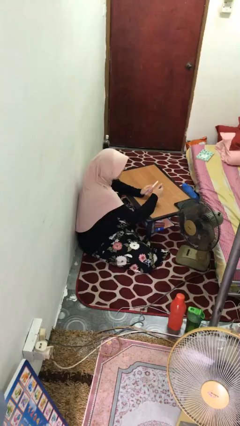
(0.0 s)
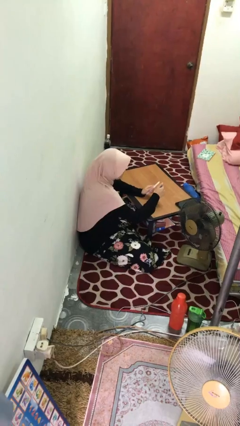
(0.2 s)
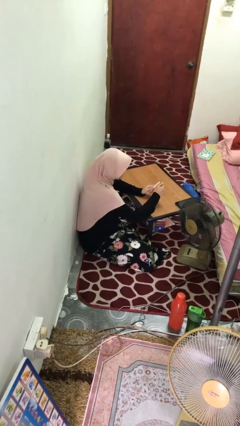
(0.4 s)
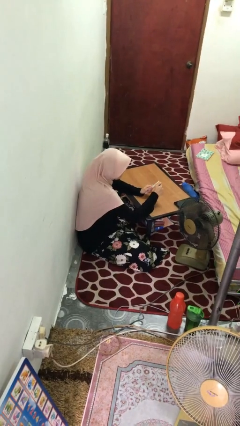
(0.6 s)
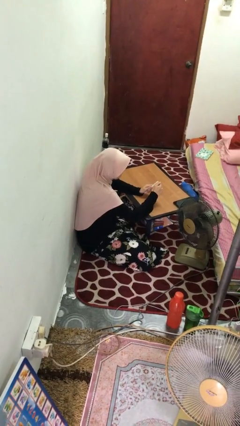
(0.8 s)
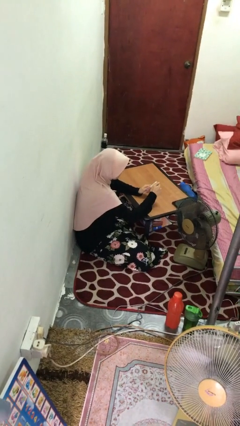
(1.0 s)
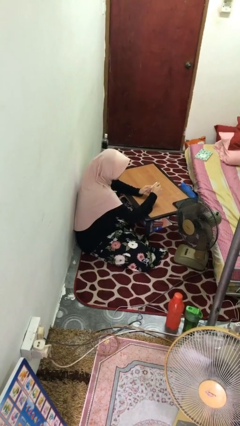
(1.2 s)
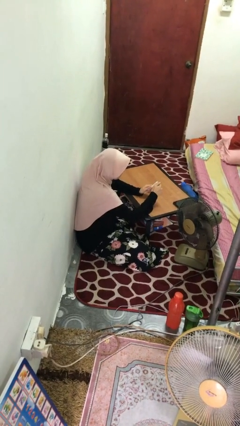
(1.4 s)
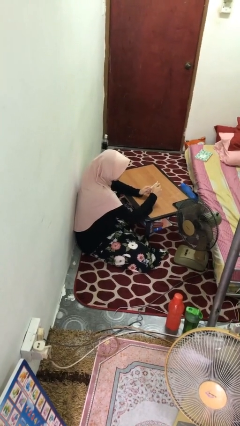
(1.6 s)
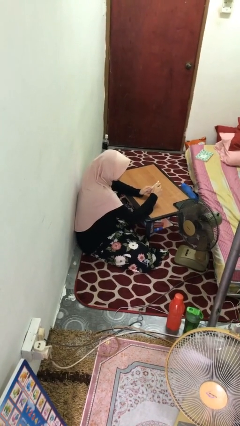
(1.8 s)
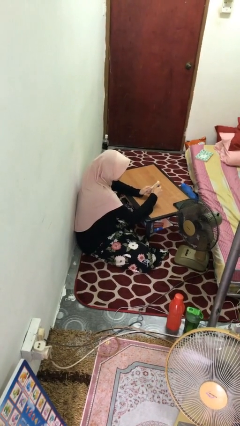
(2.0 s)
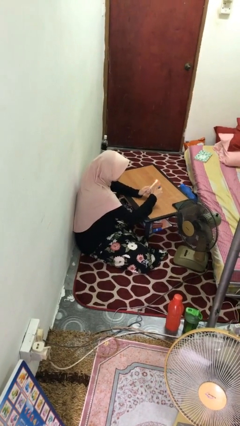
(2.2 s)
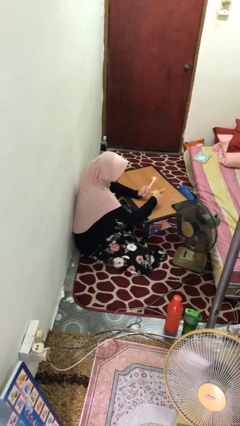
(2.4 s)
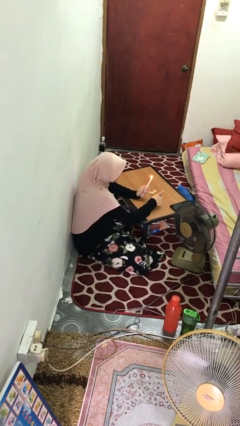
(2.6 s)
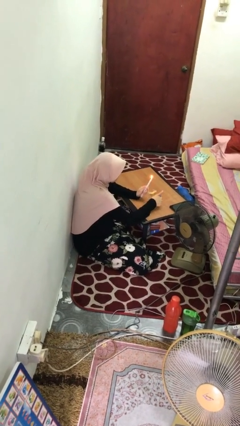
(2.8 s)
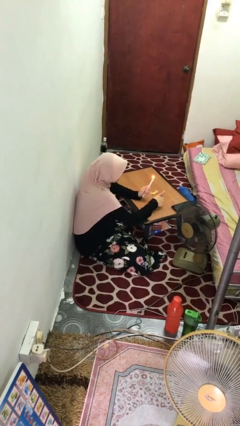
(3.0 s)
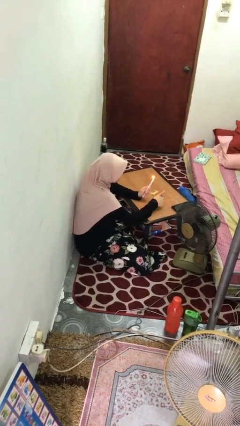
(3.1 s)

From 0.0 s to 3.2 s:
person lights candle

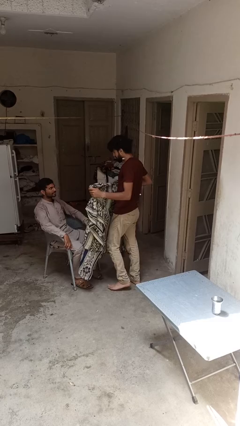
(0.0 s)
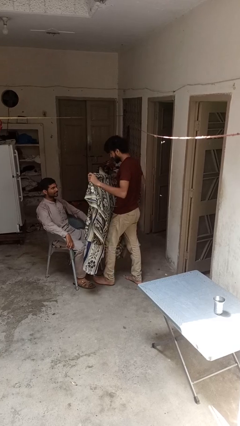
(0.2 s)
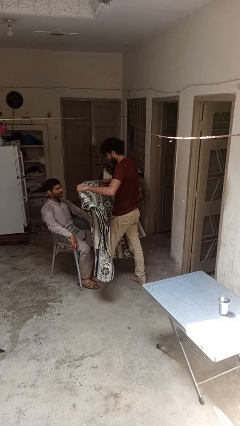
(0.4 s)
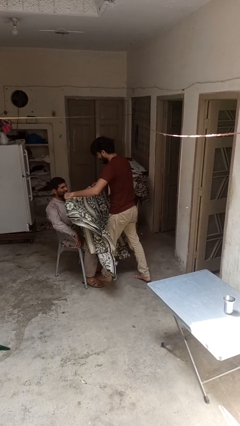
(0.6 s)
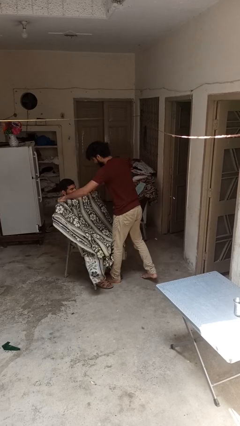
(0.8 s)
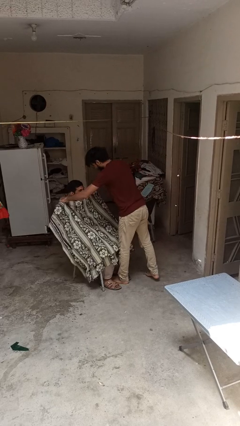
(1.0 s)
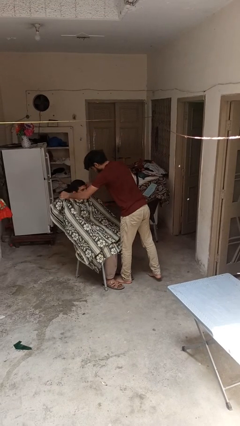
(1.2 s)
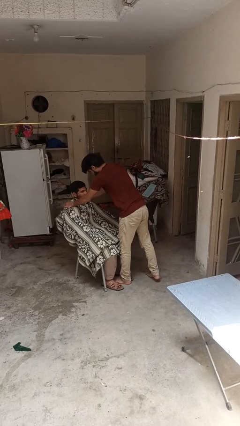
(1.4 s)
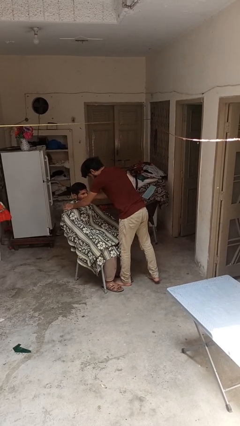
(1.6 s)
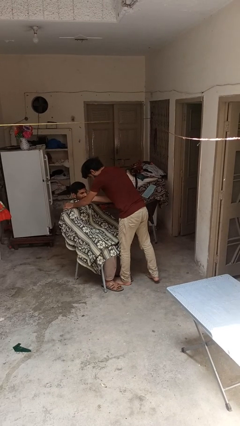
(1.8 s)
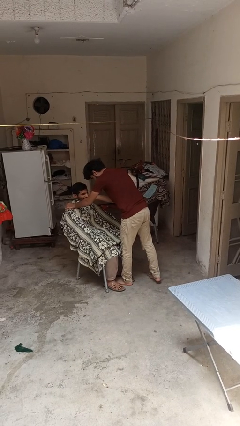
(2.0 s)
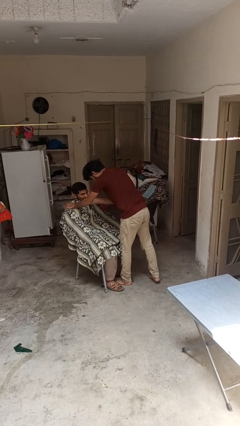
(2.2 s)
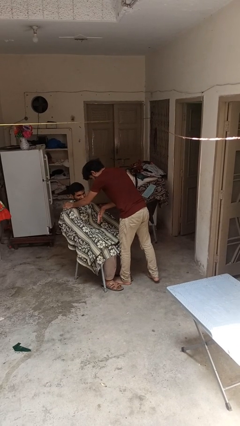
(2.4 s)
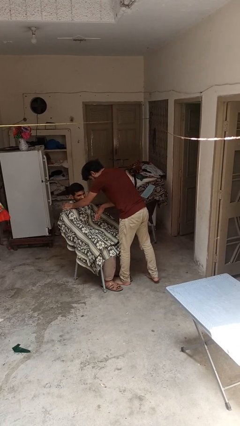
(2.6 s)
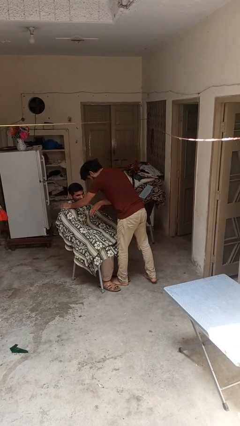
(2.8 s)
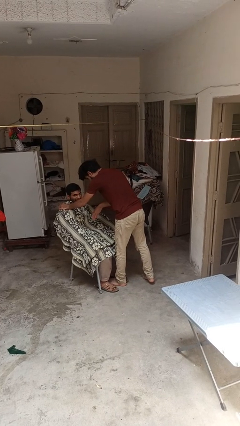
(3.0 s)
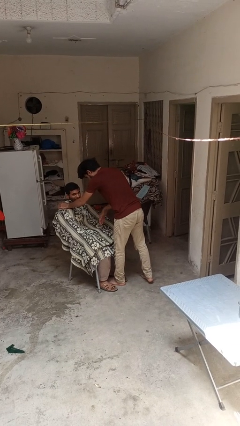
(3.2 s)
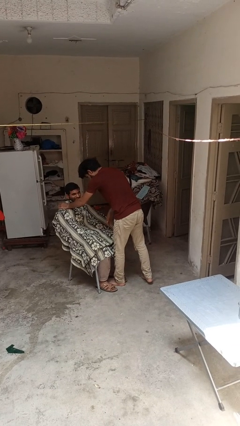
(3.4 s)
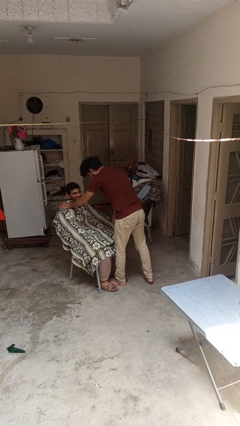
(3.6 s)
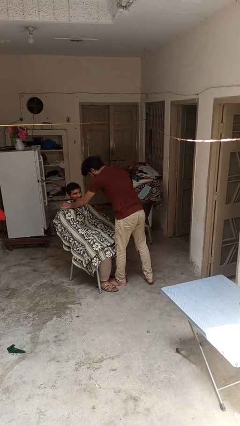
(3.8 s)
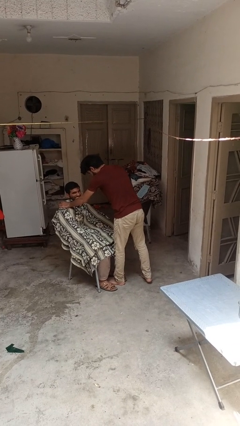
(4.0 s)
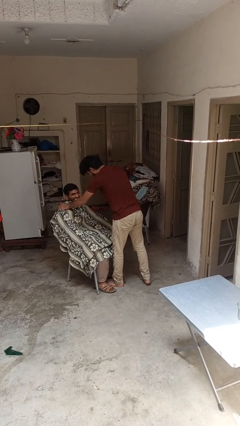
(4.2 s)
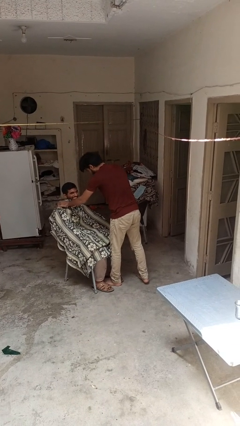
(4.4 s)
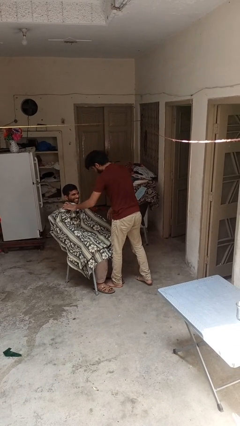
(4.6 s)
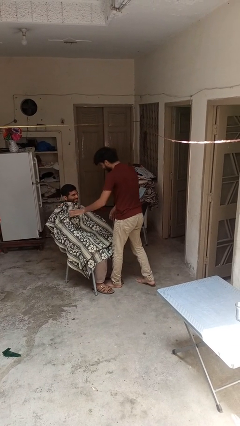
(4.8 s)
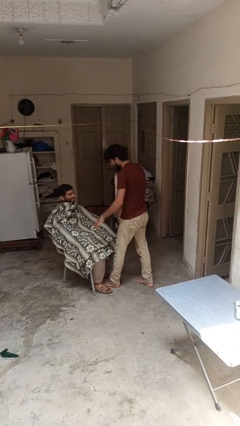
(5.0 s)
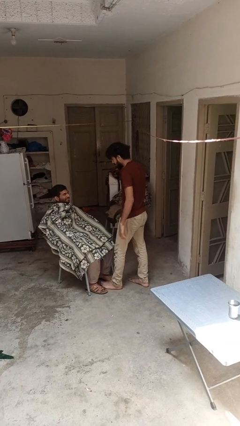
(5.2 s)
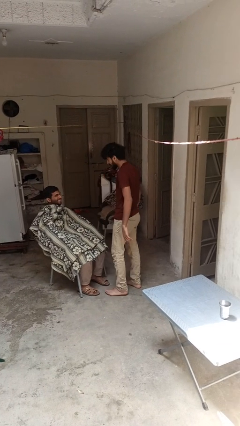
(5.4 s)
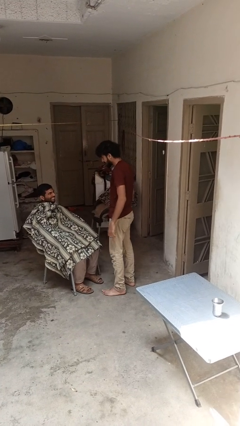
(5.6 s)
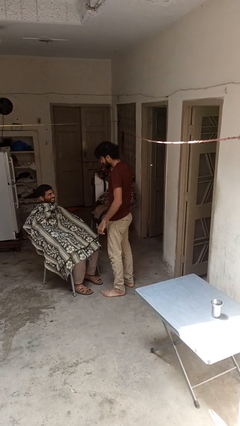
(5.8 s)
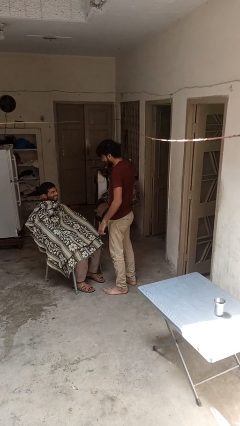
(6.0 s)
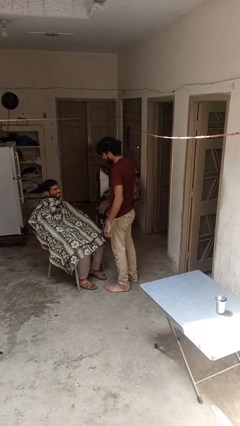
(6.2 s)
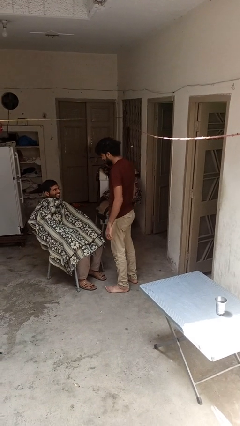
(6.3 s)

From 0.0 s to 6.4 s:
person covers friend with blanket

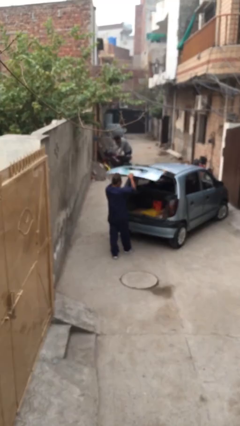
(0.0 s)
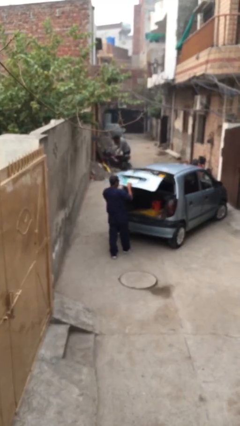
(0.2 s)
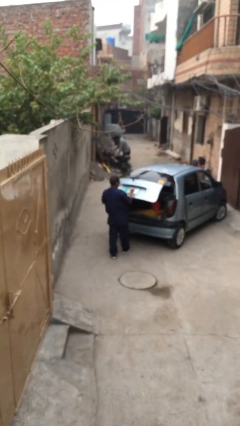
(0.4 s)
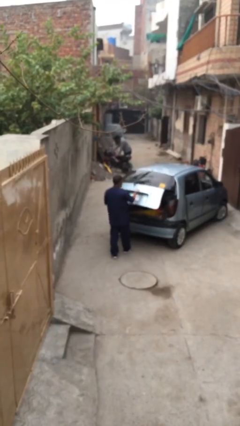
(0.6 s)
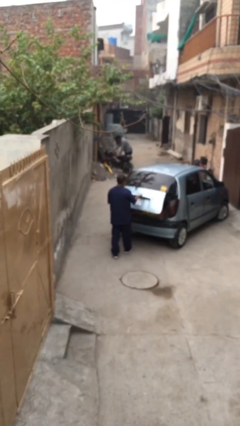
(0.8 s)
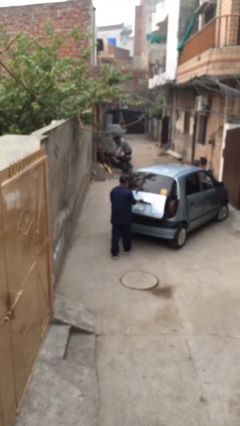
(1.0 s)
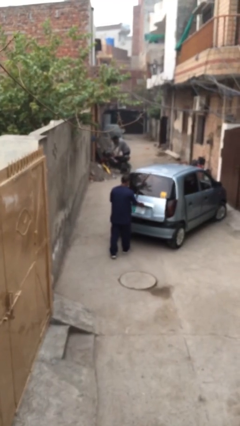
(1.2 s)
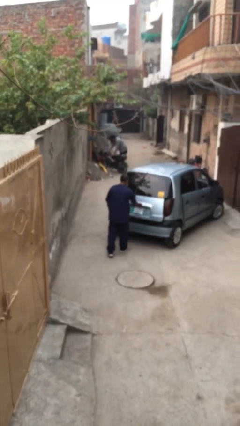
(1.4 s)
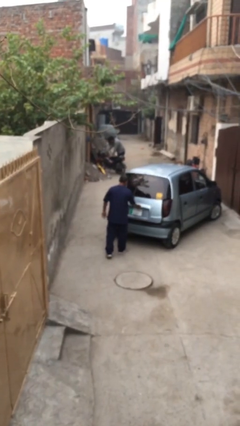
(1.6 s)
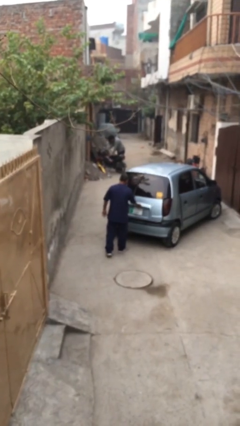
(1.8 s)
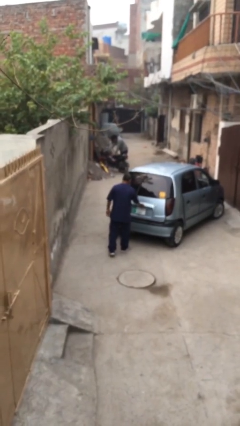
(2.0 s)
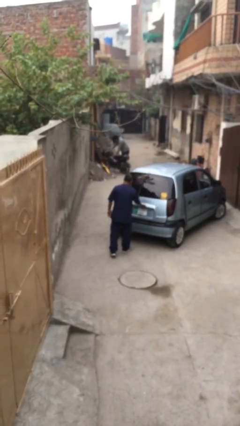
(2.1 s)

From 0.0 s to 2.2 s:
person closes car trunk

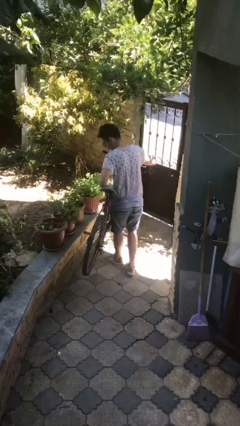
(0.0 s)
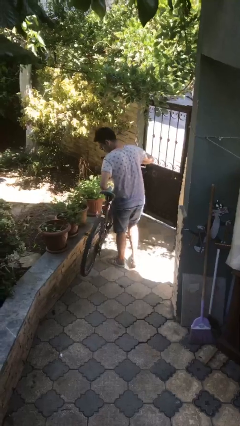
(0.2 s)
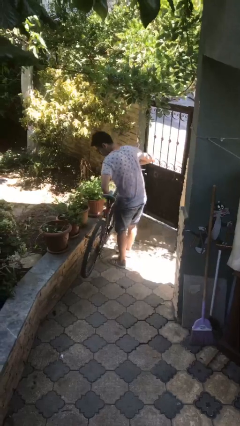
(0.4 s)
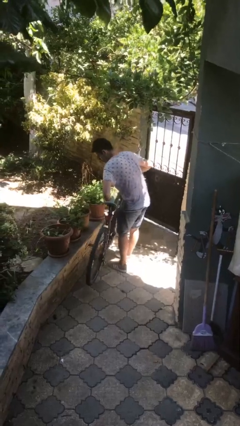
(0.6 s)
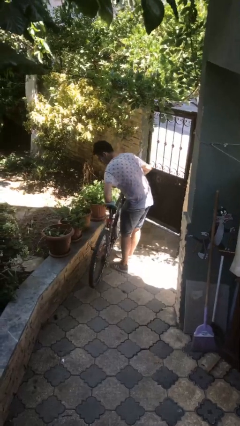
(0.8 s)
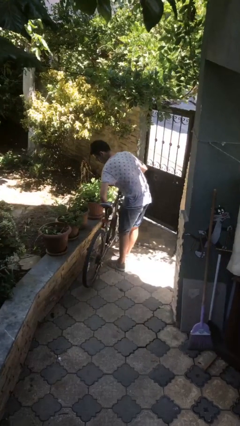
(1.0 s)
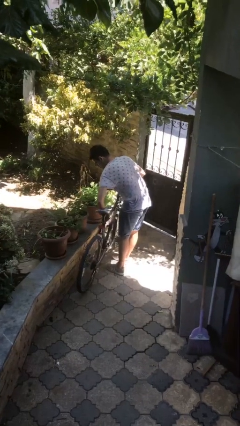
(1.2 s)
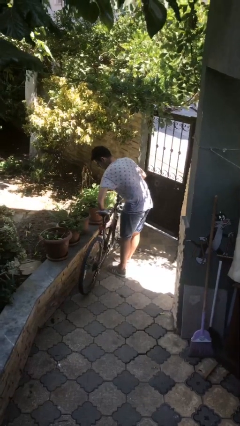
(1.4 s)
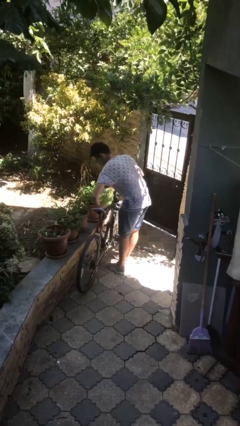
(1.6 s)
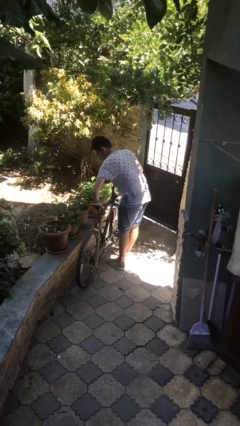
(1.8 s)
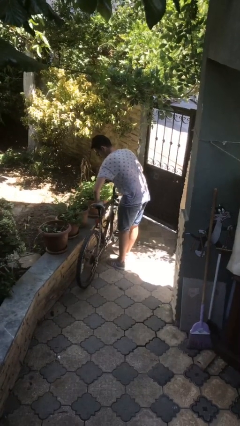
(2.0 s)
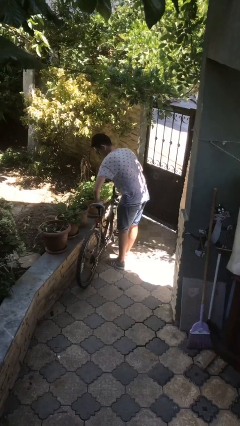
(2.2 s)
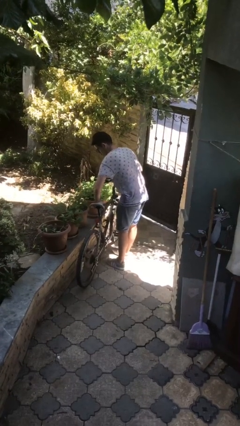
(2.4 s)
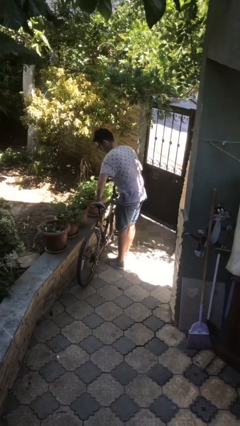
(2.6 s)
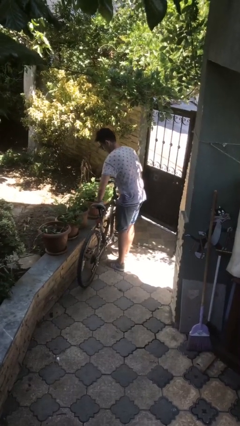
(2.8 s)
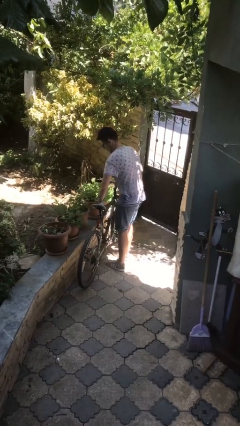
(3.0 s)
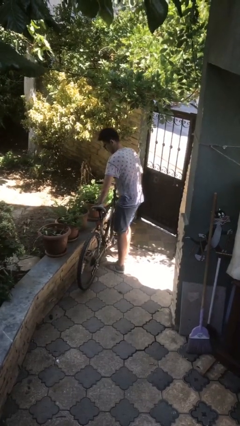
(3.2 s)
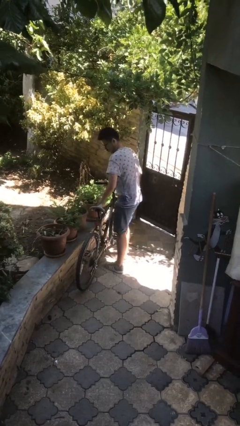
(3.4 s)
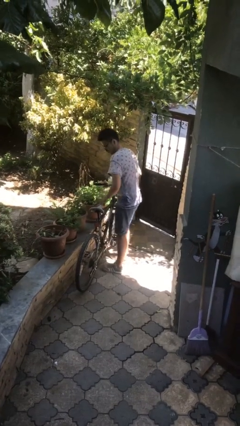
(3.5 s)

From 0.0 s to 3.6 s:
person puts down object on floor

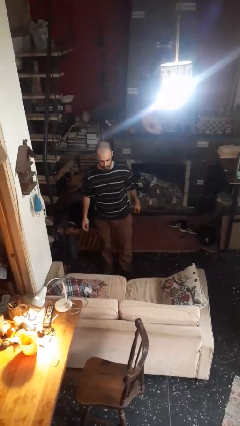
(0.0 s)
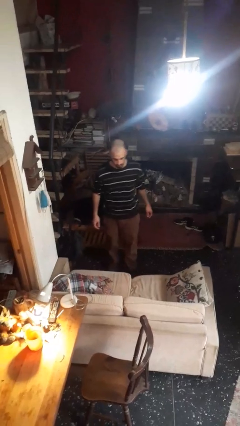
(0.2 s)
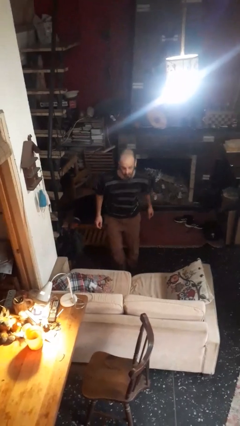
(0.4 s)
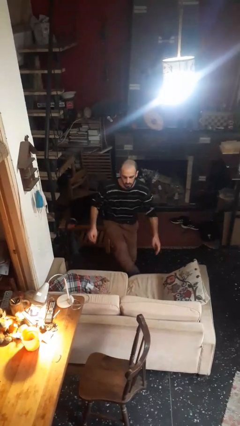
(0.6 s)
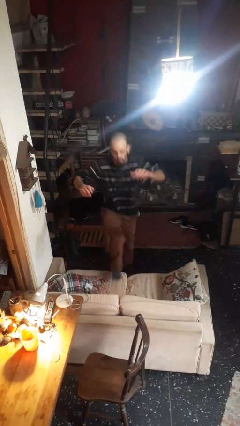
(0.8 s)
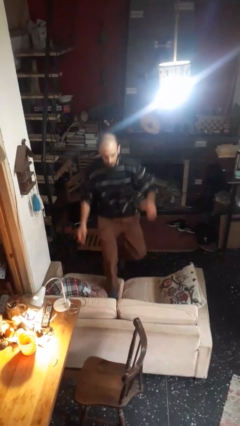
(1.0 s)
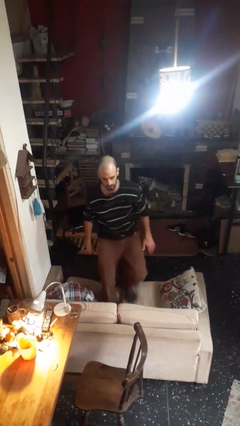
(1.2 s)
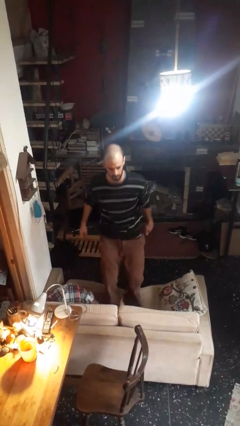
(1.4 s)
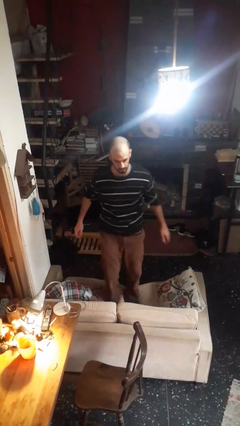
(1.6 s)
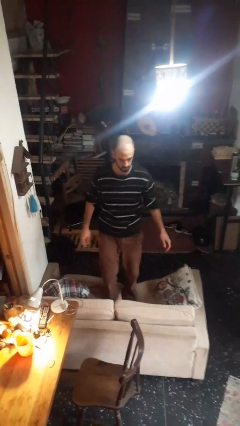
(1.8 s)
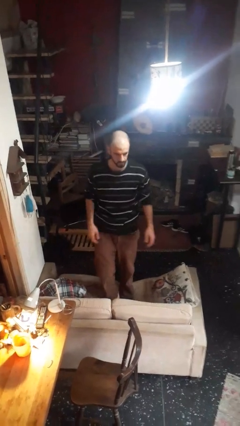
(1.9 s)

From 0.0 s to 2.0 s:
person climbs on couch

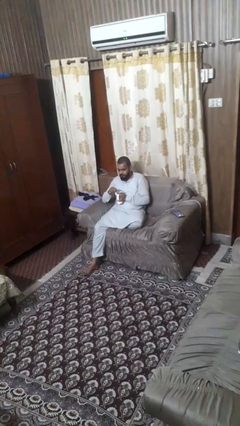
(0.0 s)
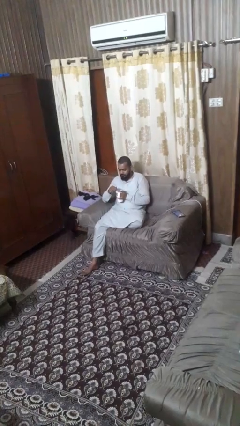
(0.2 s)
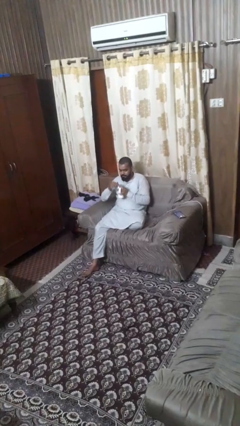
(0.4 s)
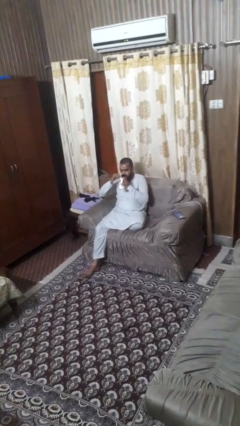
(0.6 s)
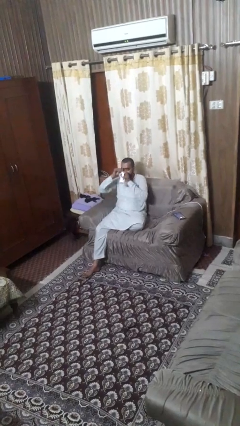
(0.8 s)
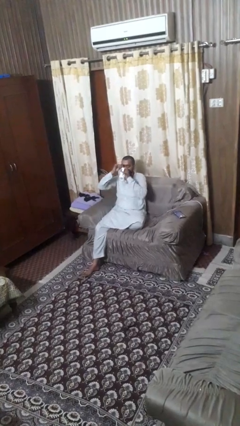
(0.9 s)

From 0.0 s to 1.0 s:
person stirs mug
